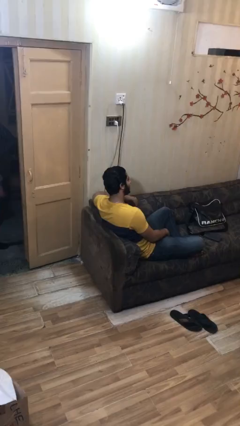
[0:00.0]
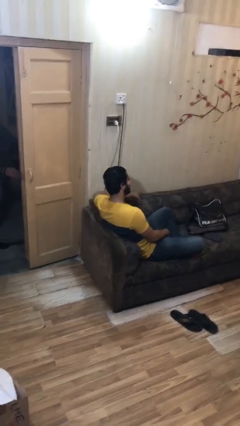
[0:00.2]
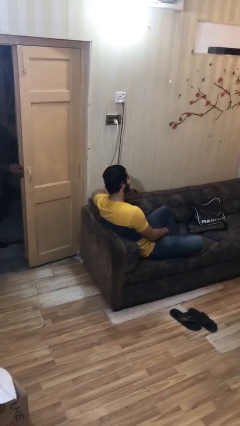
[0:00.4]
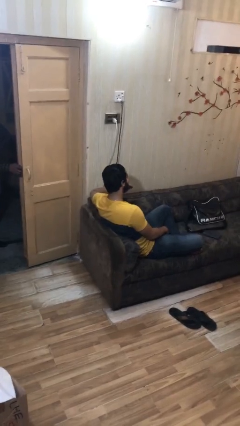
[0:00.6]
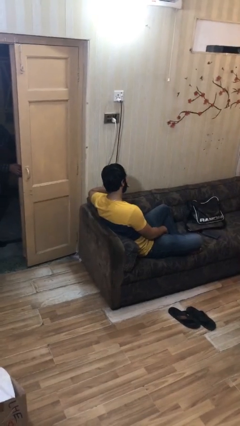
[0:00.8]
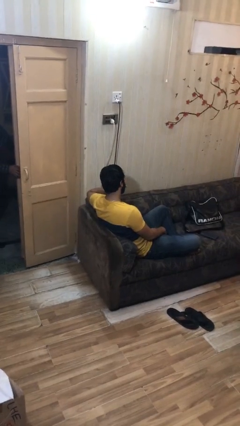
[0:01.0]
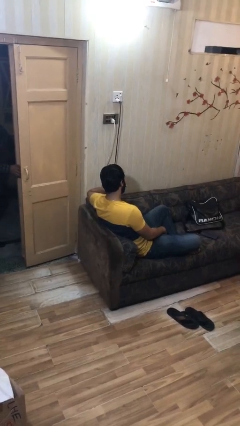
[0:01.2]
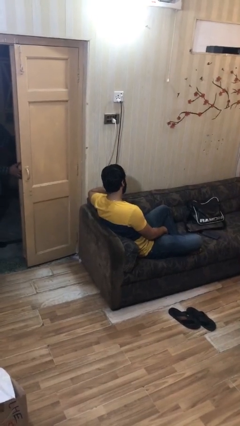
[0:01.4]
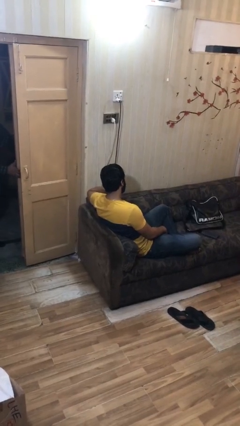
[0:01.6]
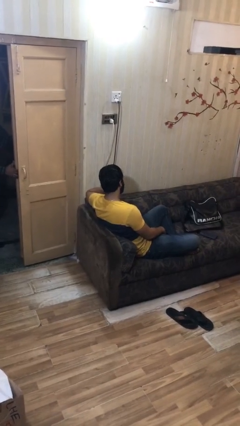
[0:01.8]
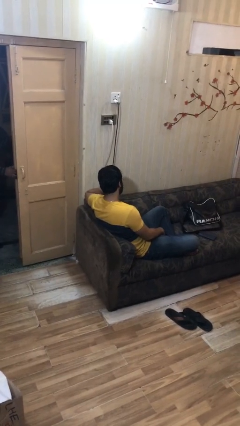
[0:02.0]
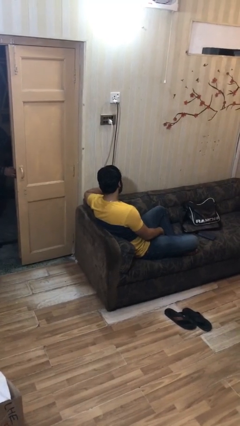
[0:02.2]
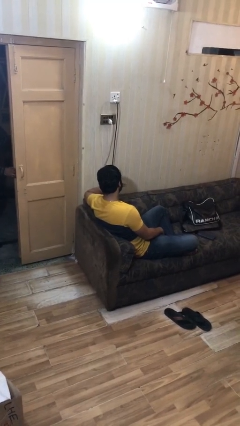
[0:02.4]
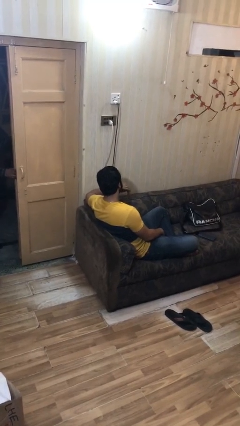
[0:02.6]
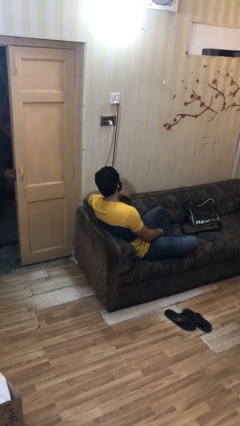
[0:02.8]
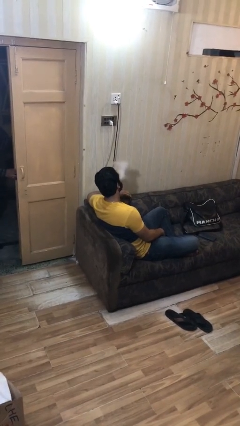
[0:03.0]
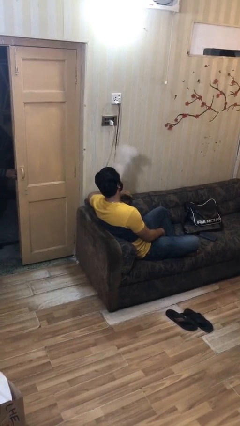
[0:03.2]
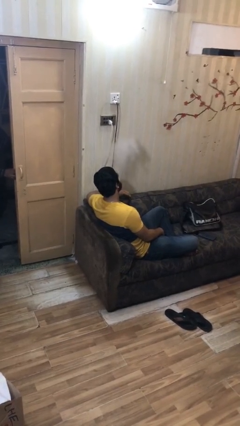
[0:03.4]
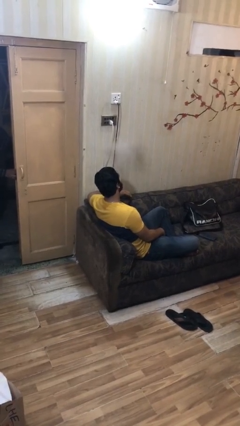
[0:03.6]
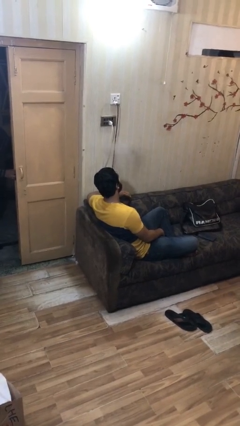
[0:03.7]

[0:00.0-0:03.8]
person vapes

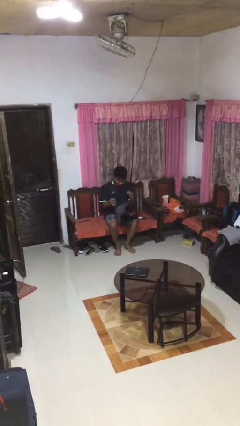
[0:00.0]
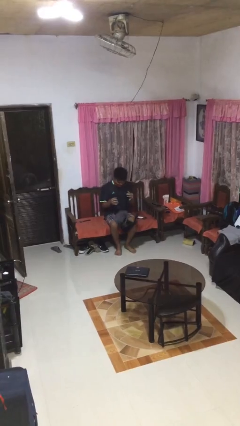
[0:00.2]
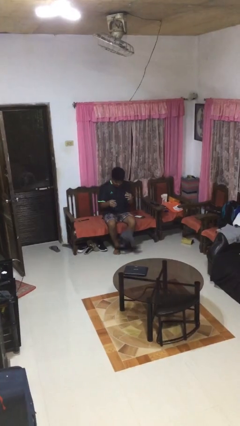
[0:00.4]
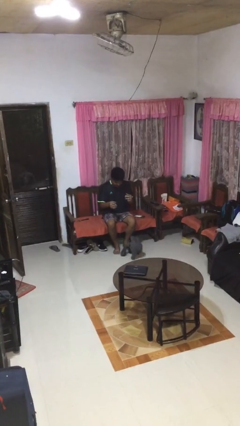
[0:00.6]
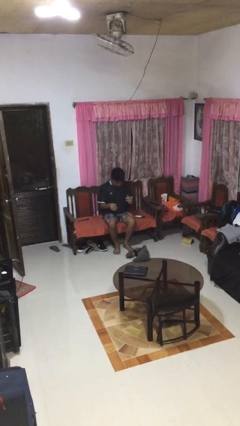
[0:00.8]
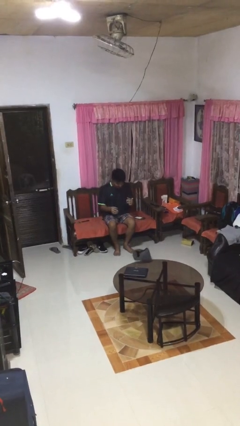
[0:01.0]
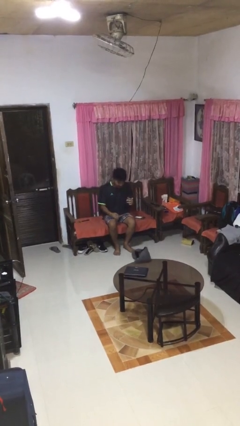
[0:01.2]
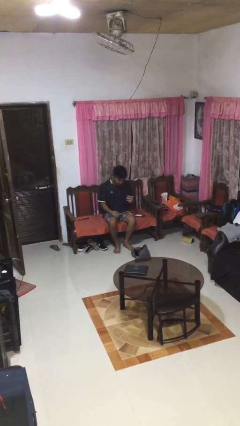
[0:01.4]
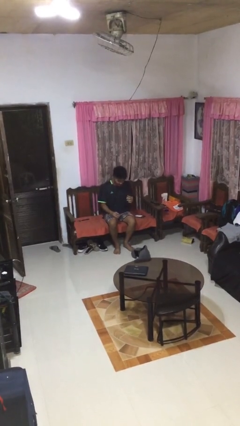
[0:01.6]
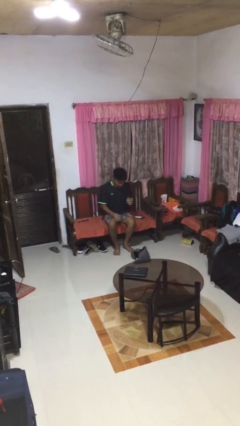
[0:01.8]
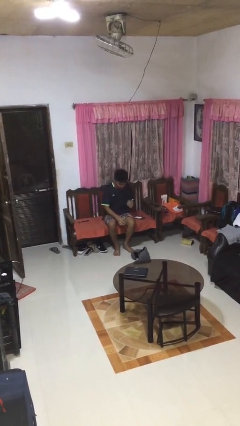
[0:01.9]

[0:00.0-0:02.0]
person drops object

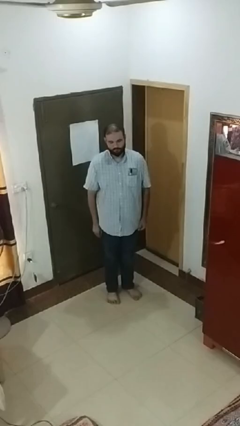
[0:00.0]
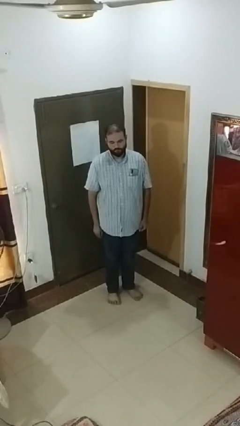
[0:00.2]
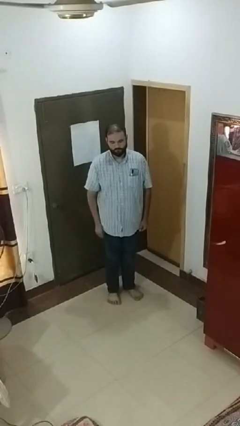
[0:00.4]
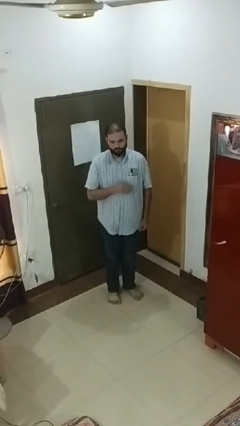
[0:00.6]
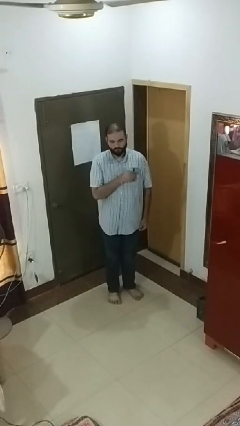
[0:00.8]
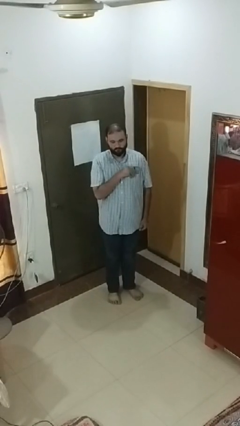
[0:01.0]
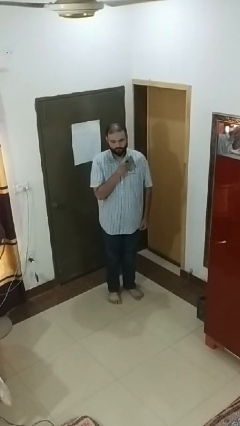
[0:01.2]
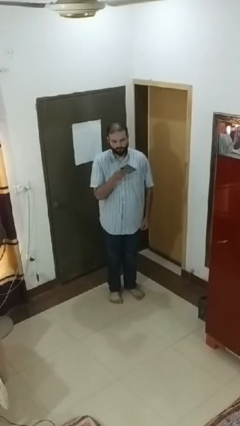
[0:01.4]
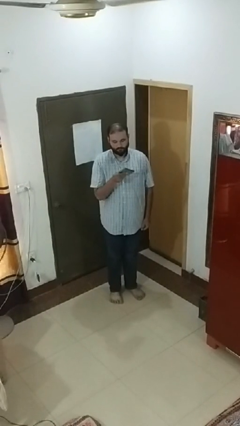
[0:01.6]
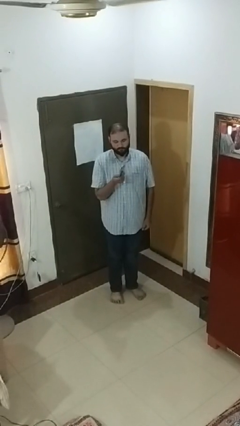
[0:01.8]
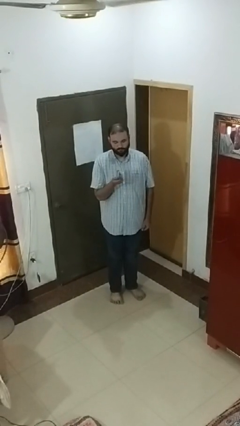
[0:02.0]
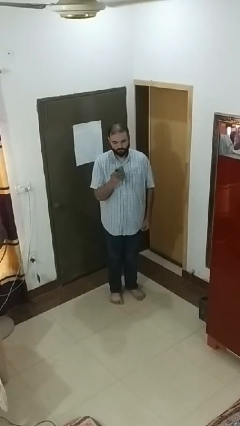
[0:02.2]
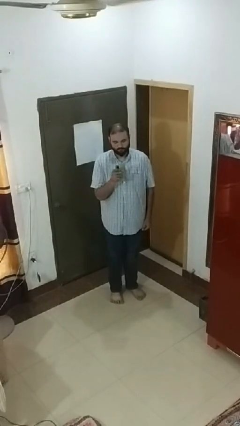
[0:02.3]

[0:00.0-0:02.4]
person takes phone from pocket

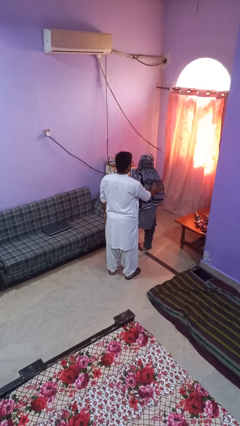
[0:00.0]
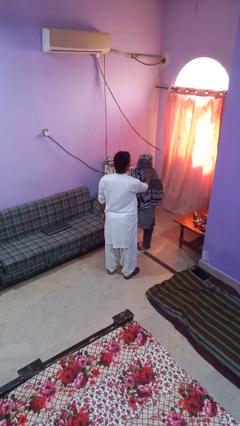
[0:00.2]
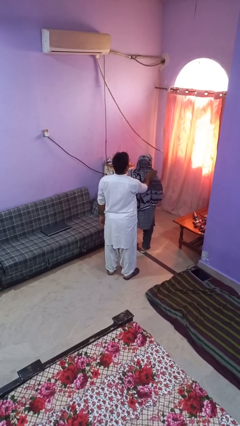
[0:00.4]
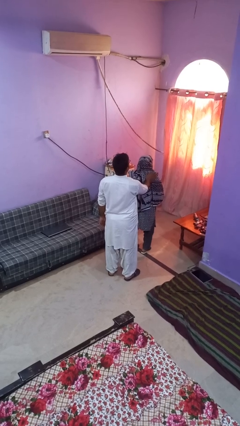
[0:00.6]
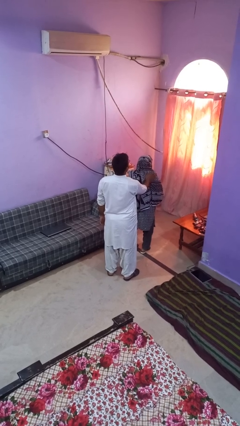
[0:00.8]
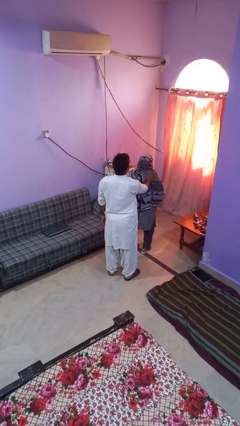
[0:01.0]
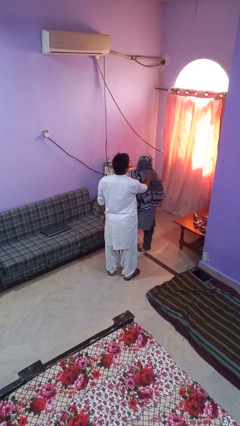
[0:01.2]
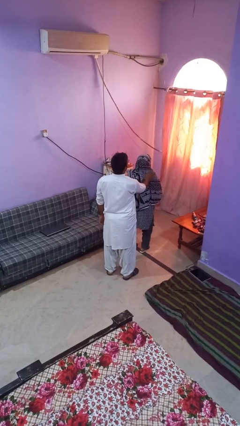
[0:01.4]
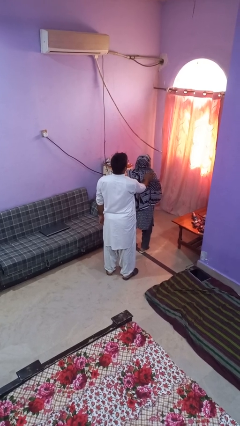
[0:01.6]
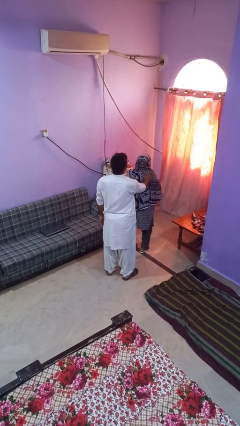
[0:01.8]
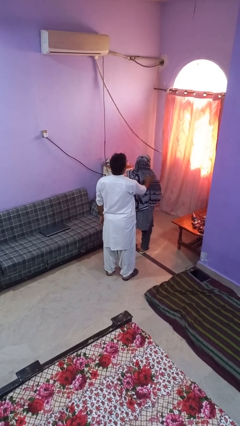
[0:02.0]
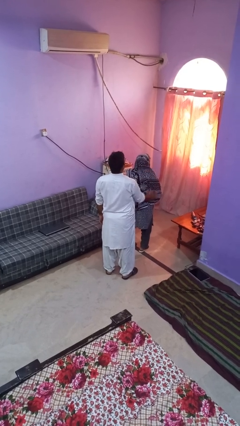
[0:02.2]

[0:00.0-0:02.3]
person touches back of person

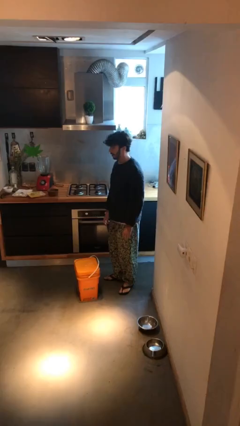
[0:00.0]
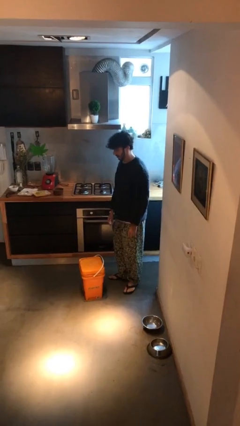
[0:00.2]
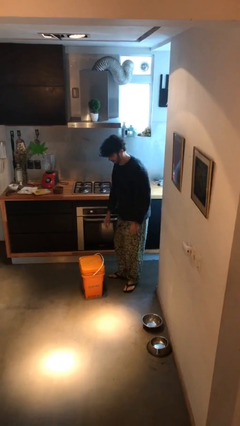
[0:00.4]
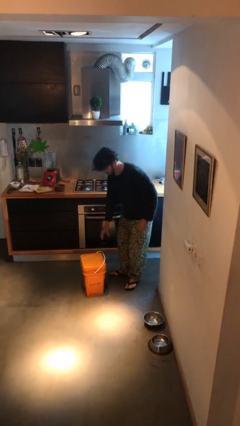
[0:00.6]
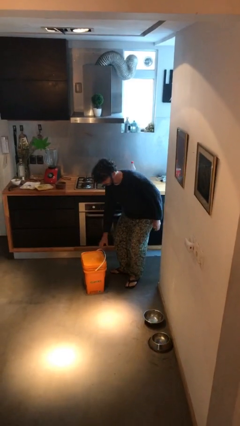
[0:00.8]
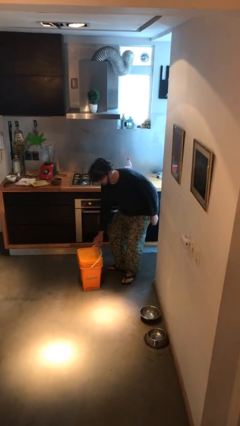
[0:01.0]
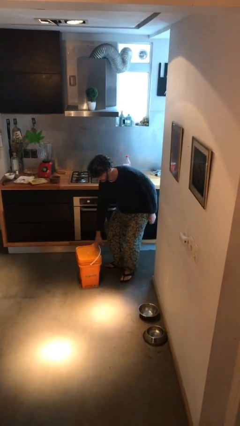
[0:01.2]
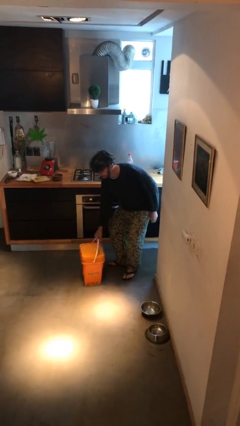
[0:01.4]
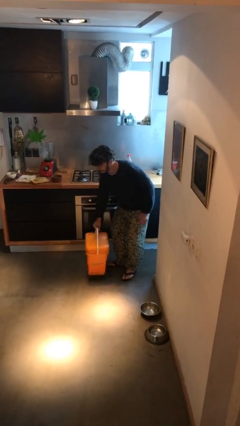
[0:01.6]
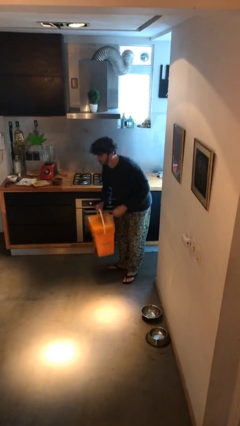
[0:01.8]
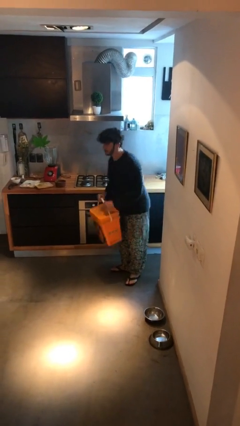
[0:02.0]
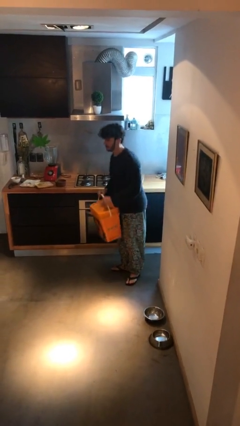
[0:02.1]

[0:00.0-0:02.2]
person picks up object from floor

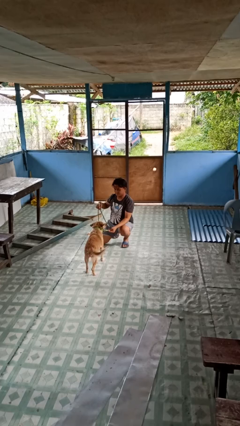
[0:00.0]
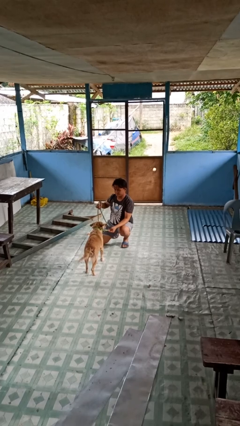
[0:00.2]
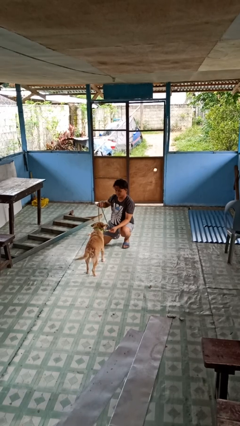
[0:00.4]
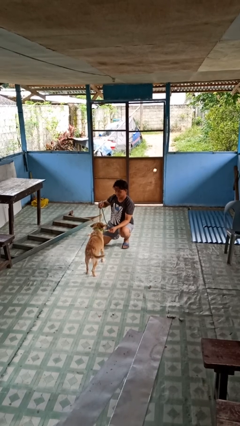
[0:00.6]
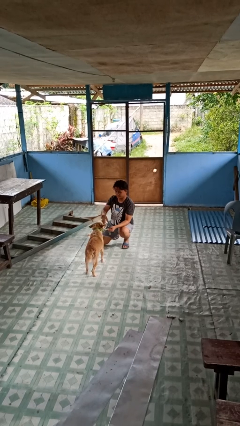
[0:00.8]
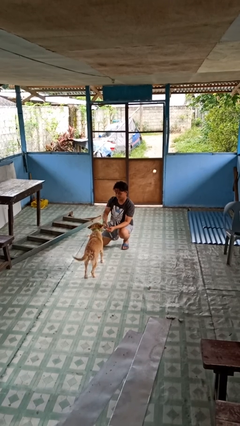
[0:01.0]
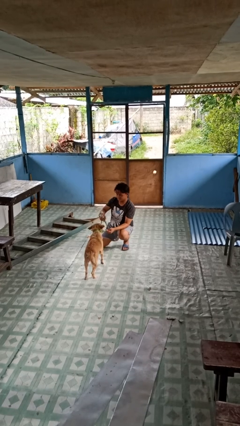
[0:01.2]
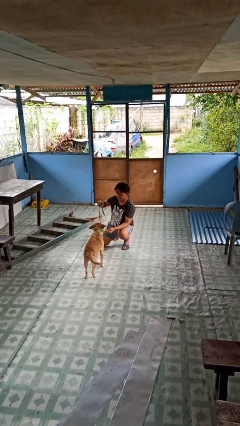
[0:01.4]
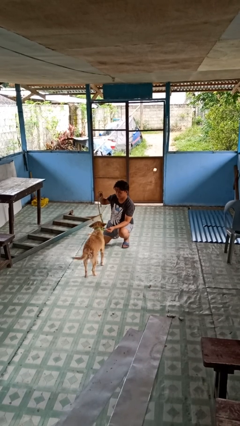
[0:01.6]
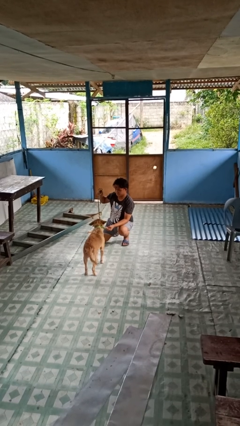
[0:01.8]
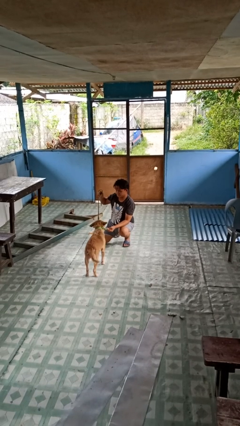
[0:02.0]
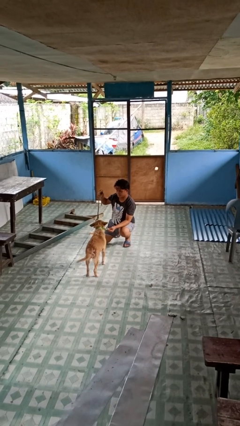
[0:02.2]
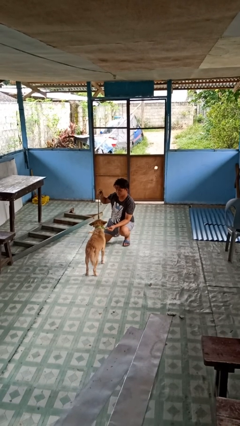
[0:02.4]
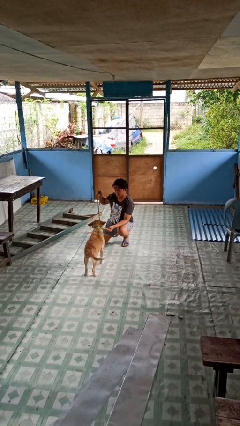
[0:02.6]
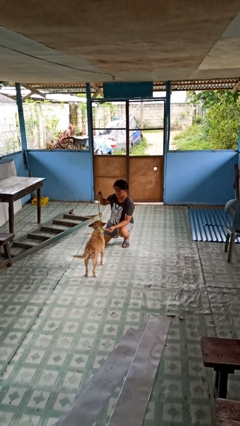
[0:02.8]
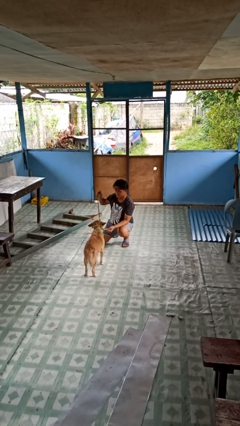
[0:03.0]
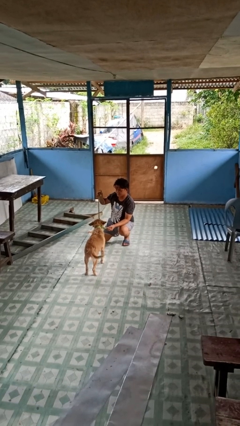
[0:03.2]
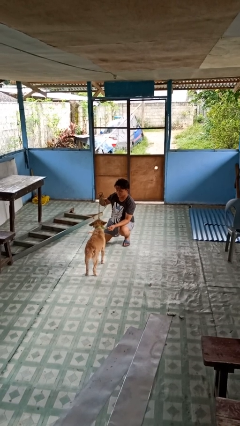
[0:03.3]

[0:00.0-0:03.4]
person unattaches leash from dog

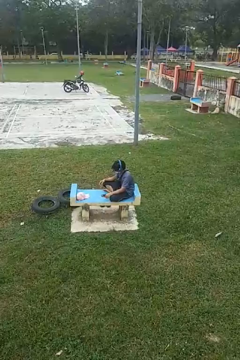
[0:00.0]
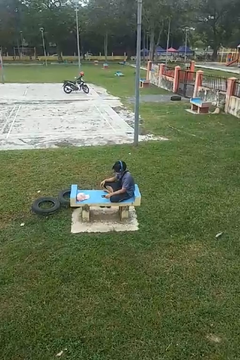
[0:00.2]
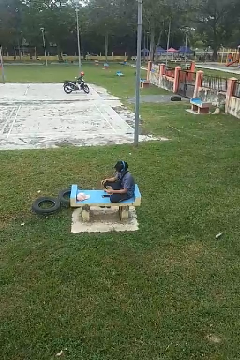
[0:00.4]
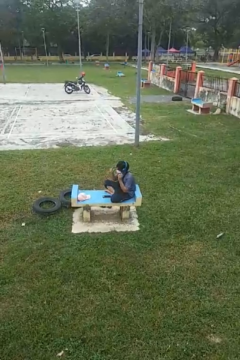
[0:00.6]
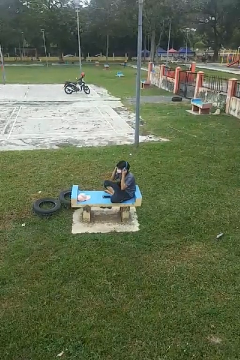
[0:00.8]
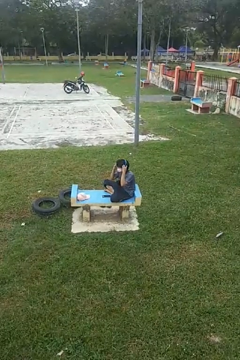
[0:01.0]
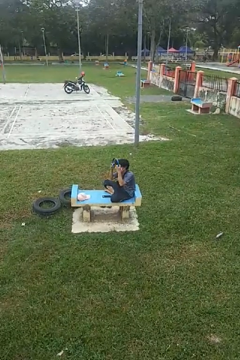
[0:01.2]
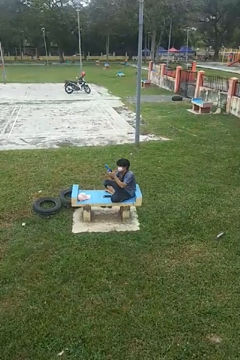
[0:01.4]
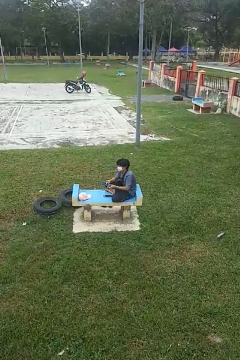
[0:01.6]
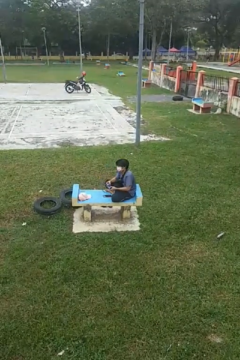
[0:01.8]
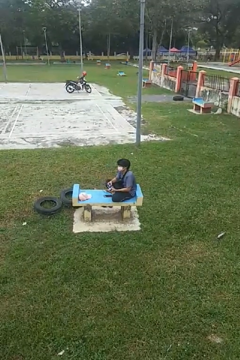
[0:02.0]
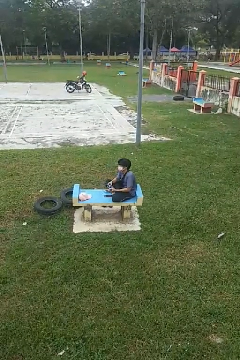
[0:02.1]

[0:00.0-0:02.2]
person takes off headphones
